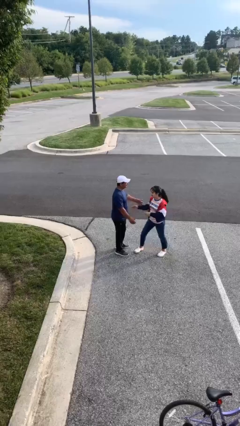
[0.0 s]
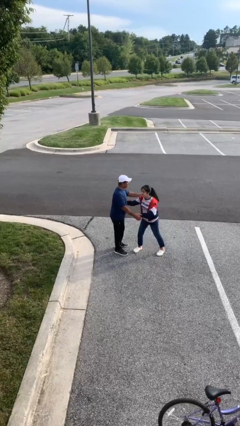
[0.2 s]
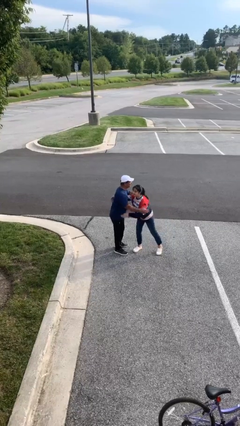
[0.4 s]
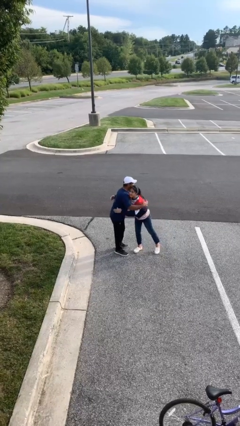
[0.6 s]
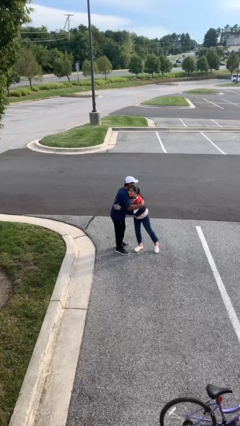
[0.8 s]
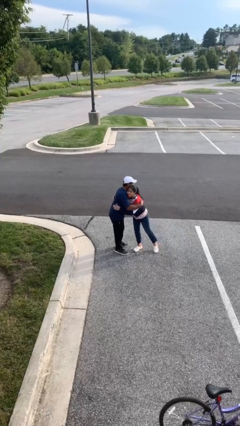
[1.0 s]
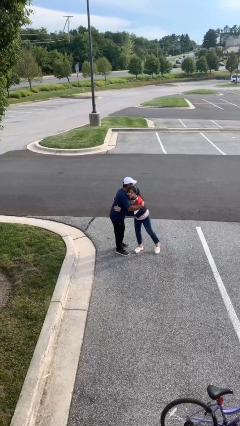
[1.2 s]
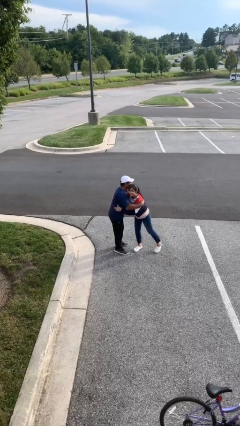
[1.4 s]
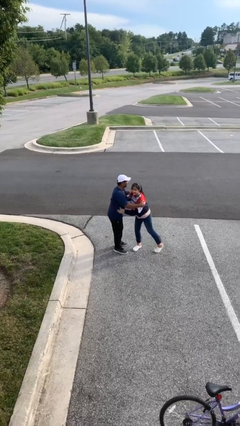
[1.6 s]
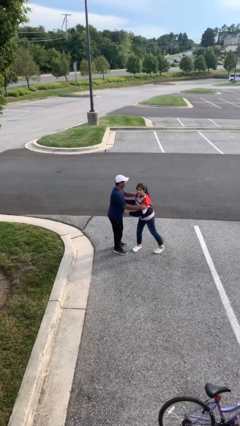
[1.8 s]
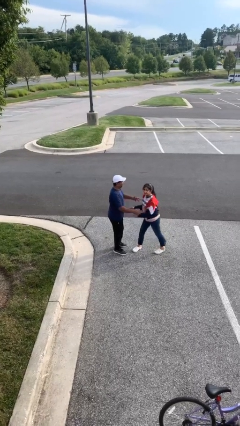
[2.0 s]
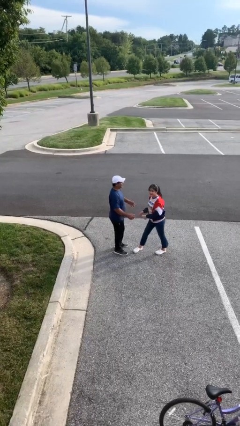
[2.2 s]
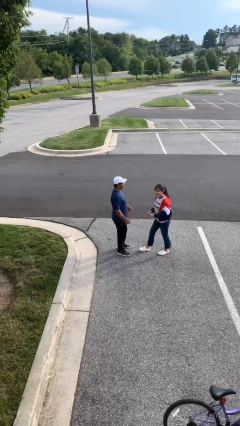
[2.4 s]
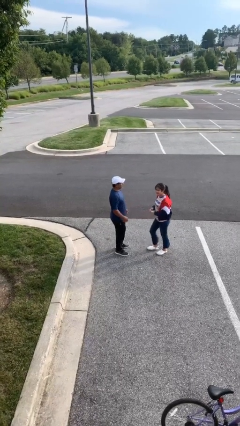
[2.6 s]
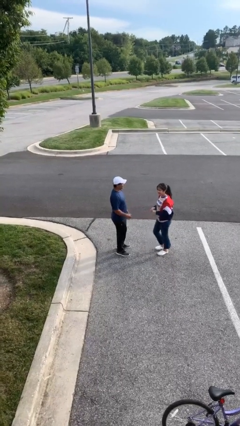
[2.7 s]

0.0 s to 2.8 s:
person embraces person

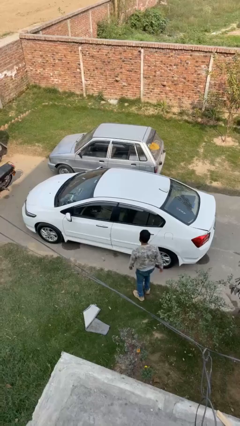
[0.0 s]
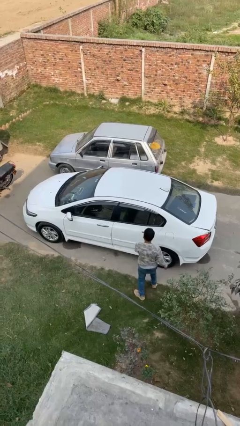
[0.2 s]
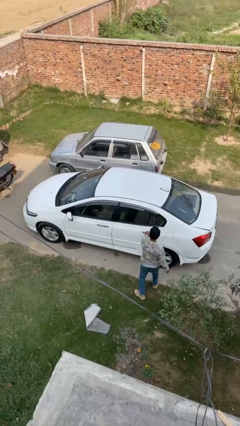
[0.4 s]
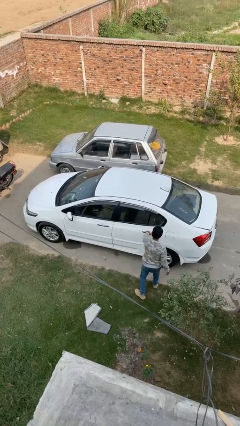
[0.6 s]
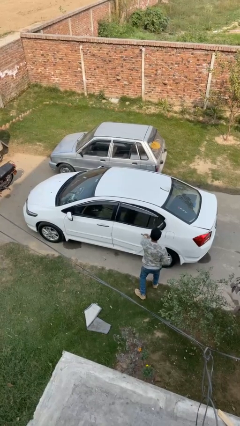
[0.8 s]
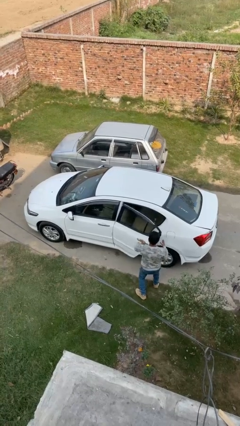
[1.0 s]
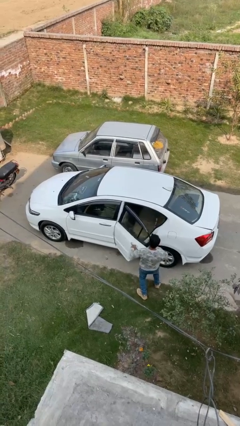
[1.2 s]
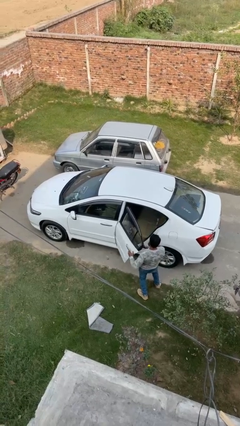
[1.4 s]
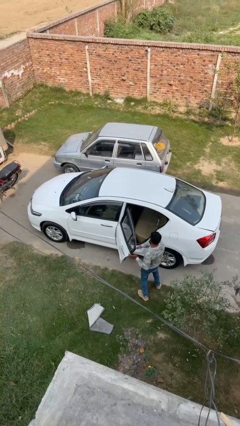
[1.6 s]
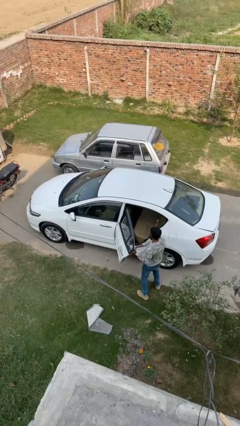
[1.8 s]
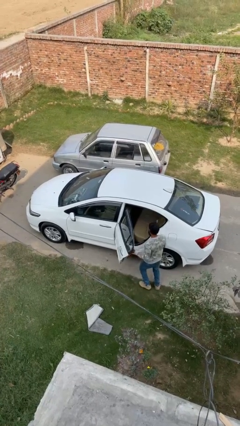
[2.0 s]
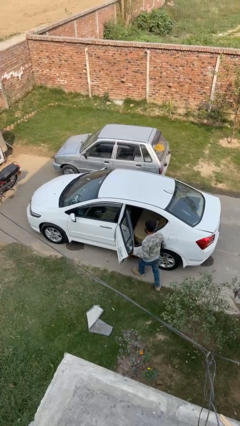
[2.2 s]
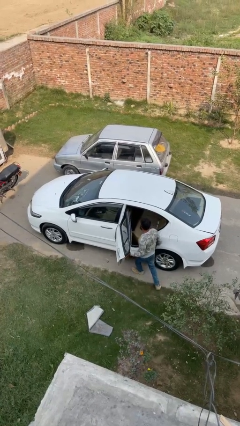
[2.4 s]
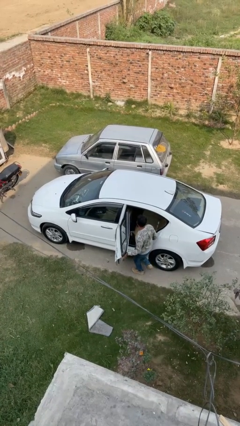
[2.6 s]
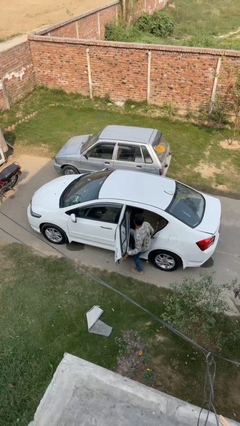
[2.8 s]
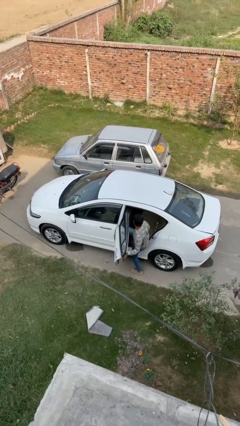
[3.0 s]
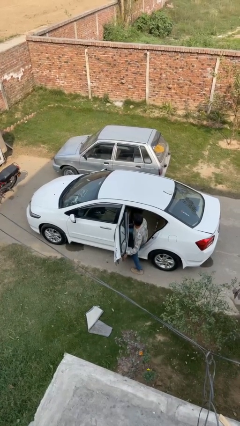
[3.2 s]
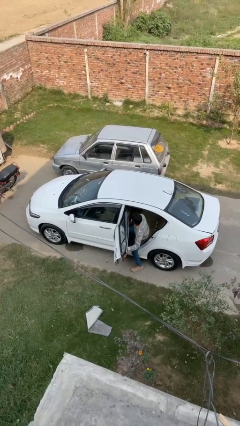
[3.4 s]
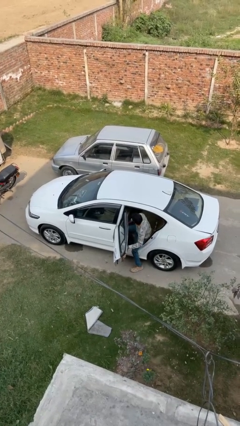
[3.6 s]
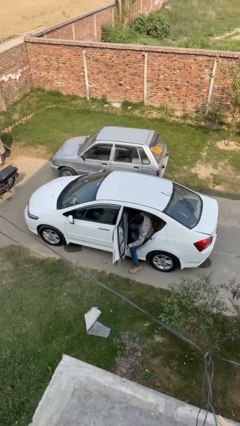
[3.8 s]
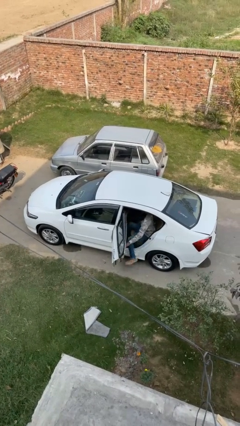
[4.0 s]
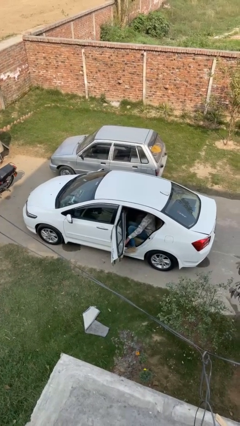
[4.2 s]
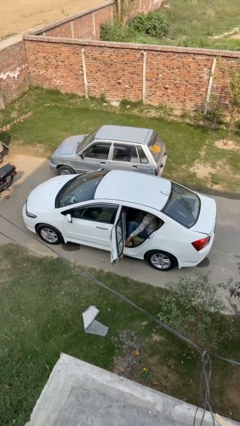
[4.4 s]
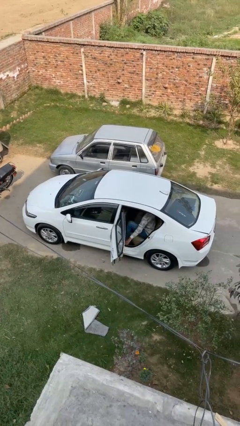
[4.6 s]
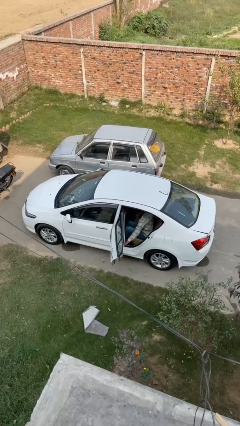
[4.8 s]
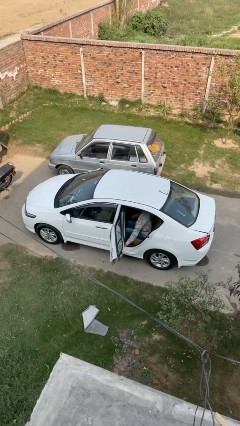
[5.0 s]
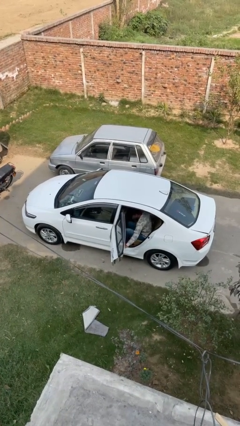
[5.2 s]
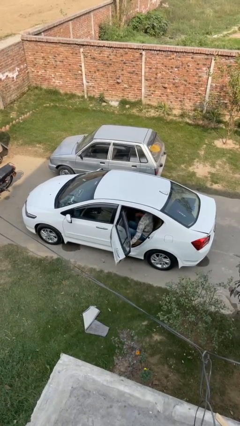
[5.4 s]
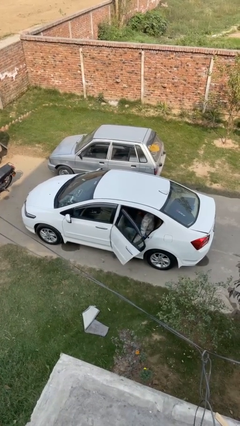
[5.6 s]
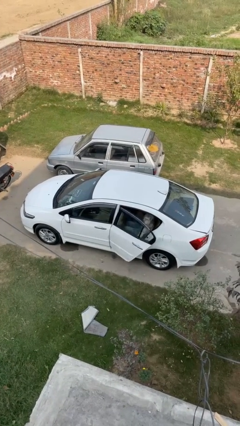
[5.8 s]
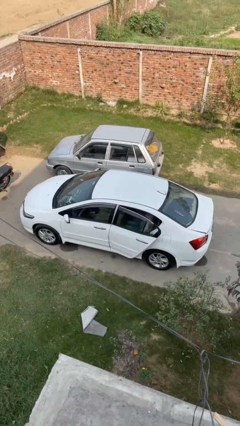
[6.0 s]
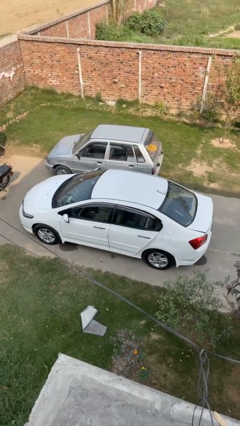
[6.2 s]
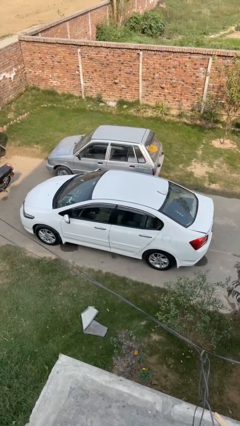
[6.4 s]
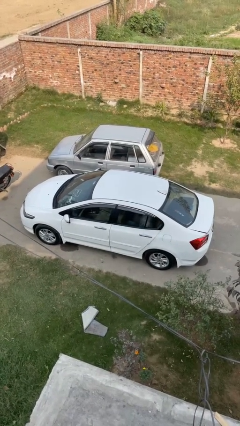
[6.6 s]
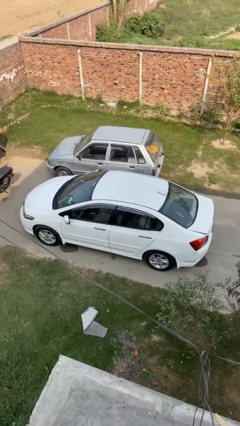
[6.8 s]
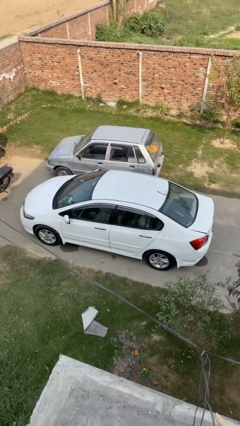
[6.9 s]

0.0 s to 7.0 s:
car picks up person

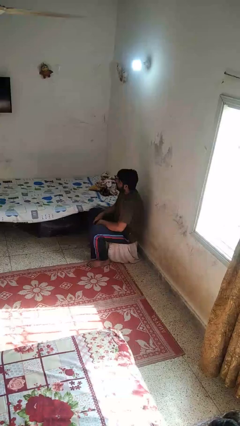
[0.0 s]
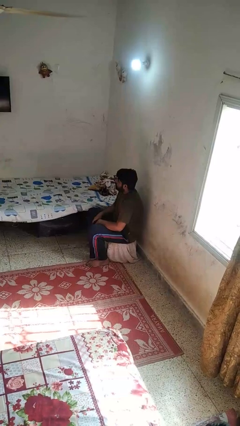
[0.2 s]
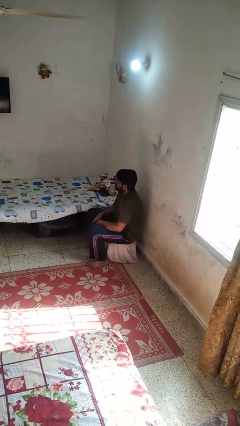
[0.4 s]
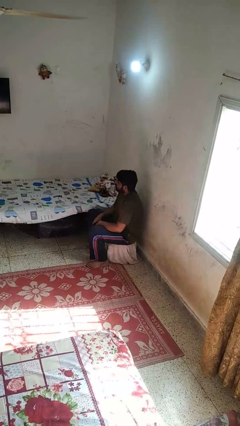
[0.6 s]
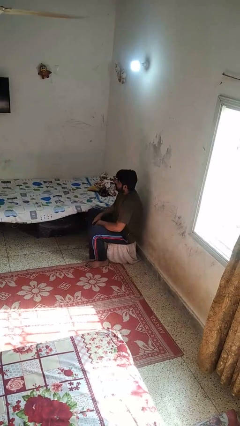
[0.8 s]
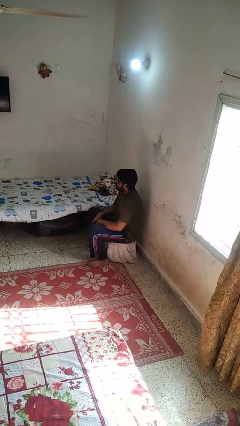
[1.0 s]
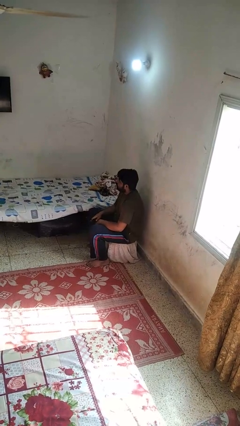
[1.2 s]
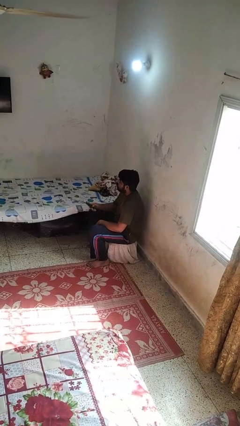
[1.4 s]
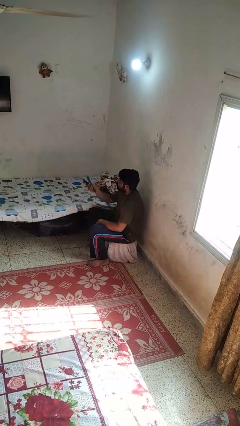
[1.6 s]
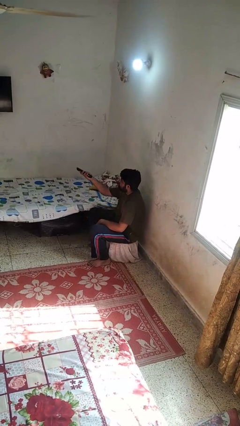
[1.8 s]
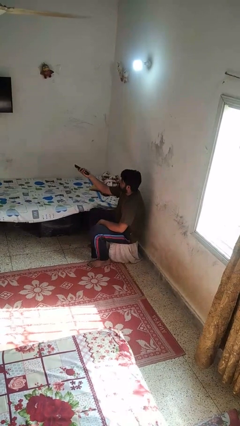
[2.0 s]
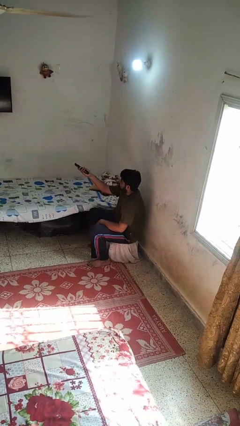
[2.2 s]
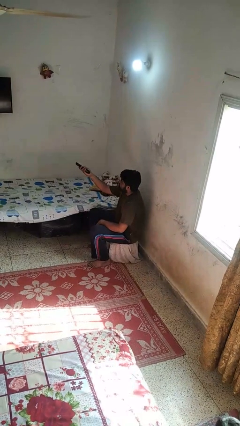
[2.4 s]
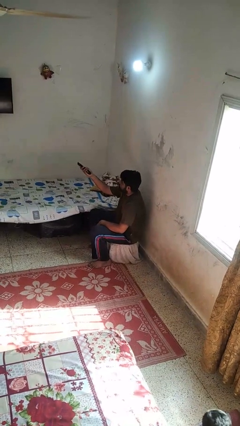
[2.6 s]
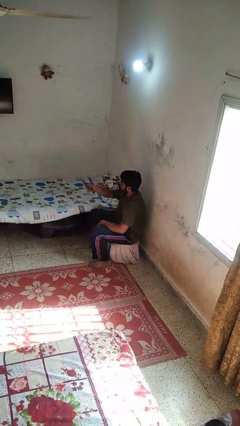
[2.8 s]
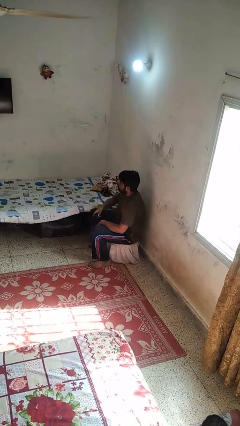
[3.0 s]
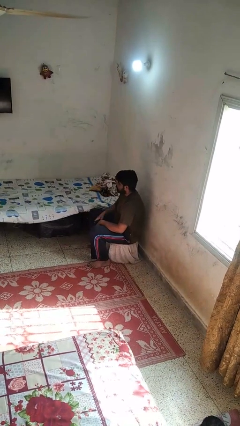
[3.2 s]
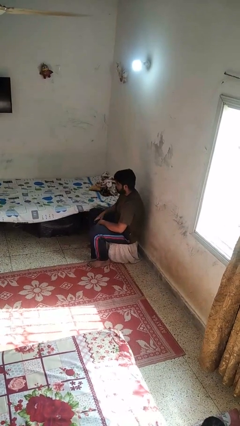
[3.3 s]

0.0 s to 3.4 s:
person uses television remote

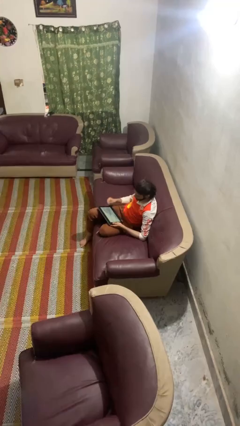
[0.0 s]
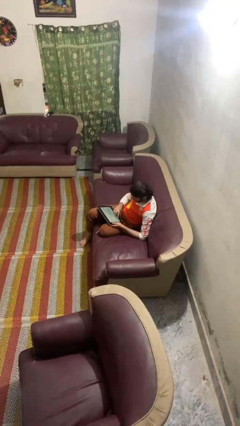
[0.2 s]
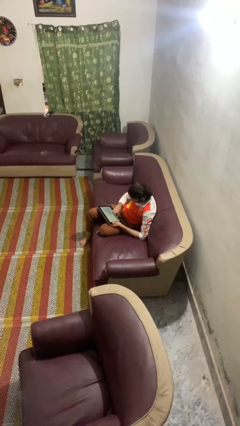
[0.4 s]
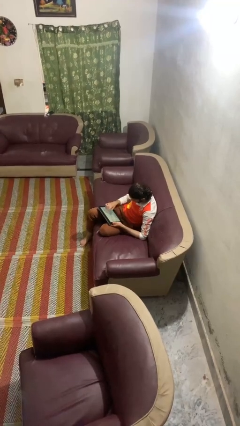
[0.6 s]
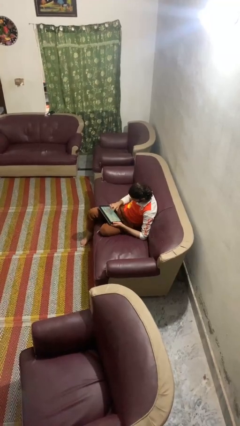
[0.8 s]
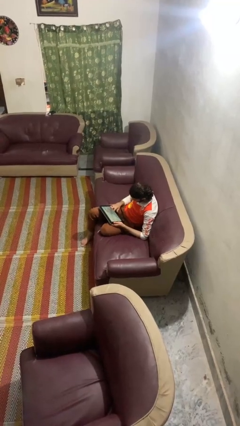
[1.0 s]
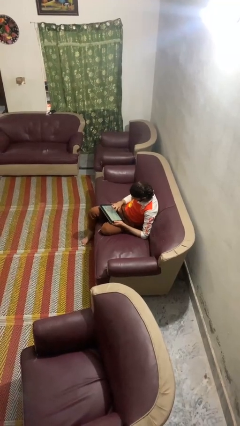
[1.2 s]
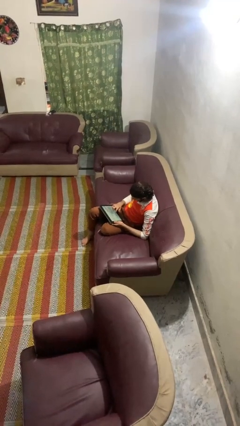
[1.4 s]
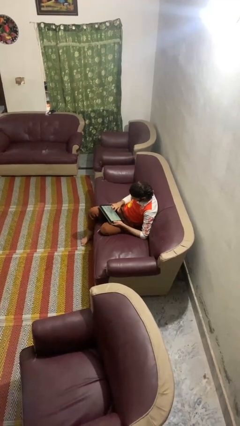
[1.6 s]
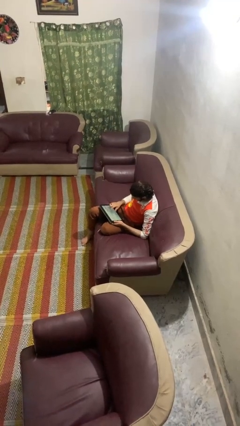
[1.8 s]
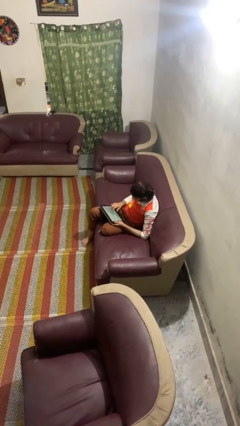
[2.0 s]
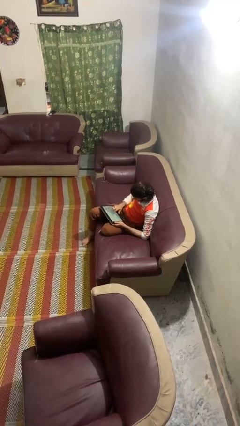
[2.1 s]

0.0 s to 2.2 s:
person interacts with tablet

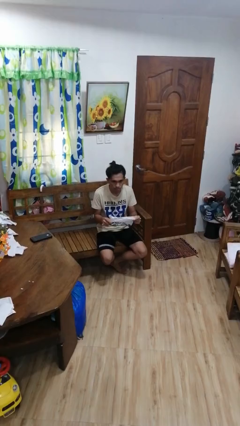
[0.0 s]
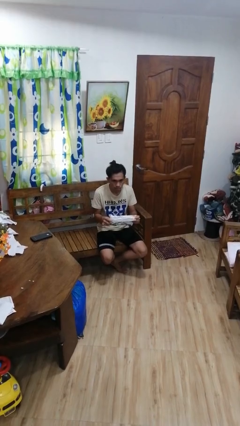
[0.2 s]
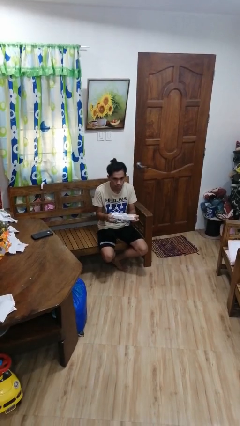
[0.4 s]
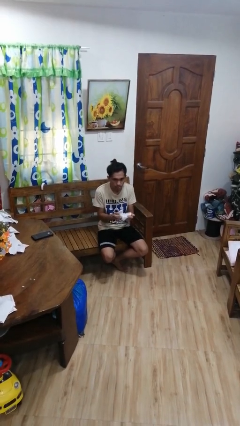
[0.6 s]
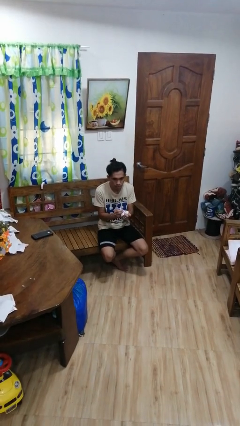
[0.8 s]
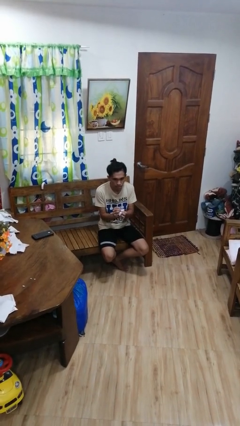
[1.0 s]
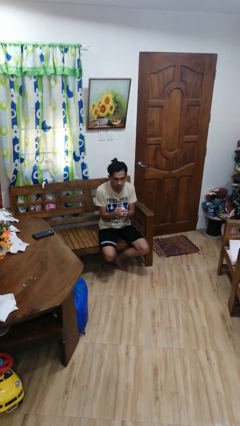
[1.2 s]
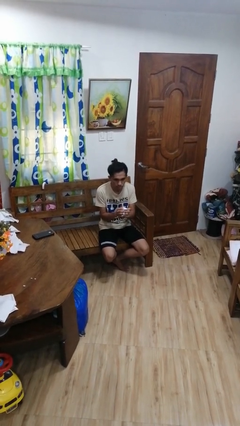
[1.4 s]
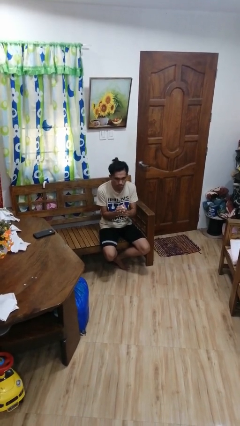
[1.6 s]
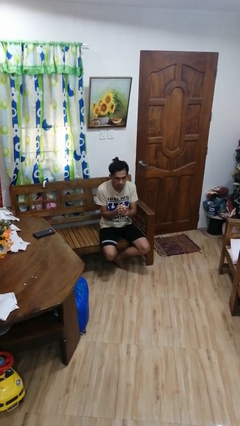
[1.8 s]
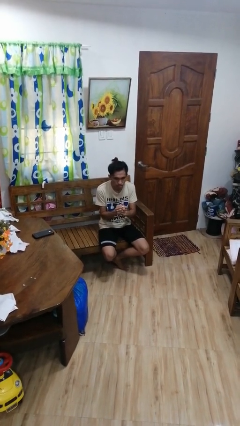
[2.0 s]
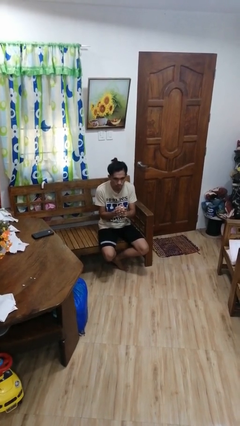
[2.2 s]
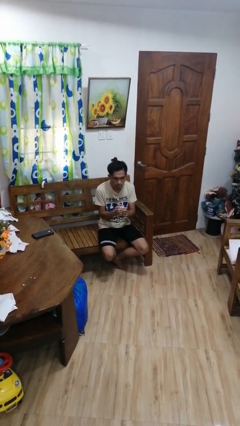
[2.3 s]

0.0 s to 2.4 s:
person crumples paper
